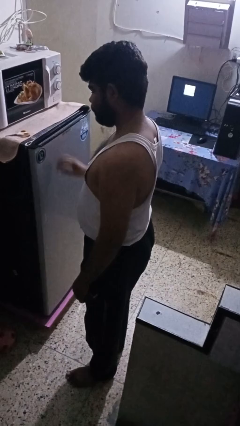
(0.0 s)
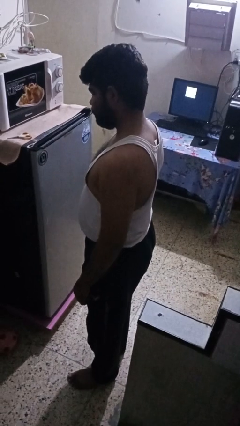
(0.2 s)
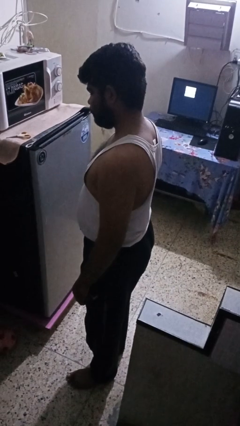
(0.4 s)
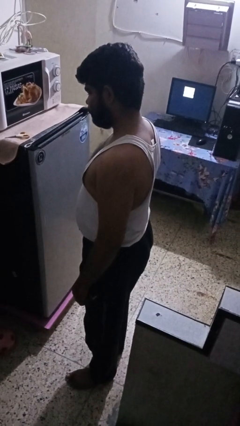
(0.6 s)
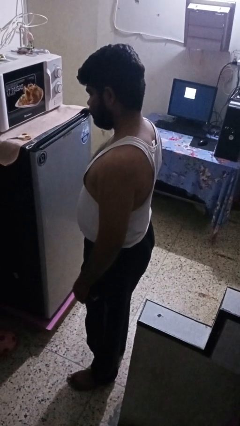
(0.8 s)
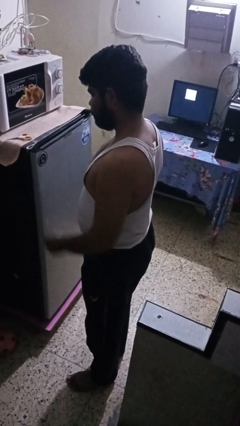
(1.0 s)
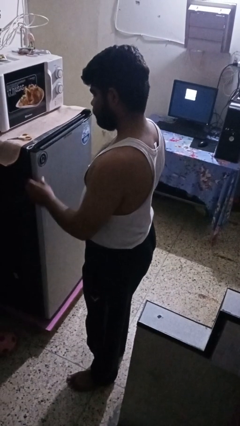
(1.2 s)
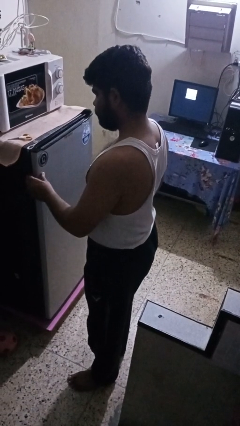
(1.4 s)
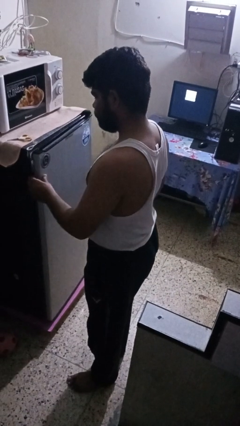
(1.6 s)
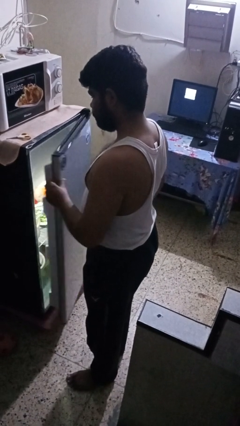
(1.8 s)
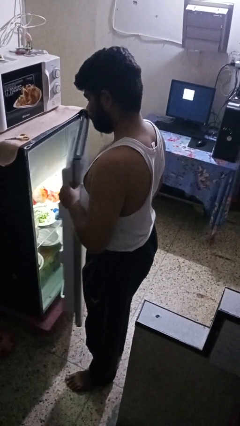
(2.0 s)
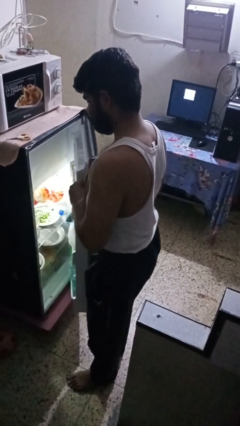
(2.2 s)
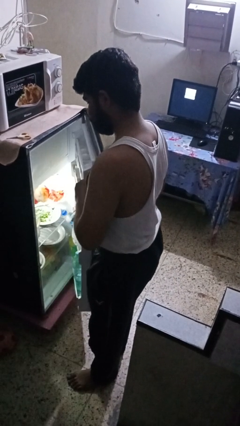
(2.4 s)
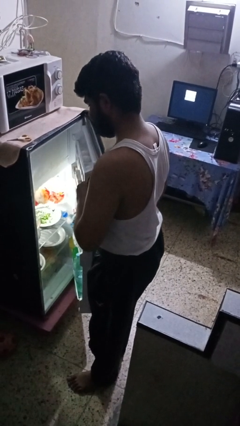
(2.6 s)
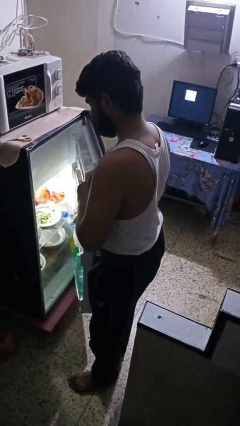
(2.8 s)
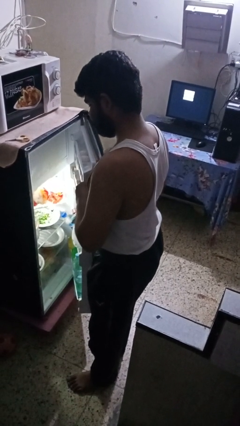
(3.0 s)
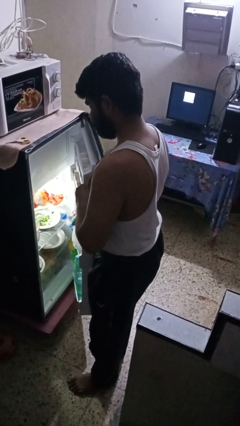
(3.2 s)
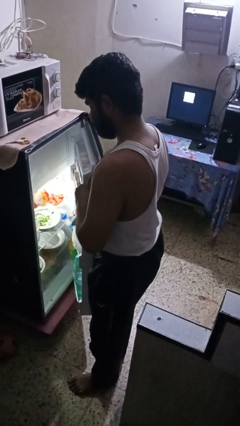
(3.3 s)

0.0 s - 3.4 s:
person opens refrigerator

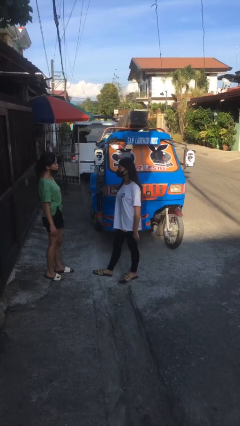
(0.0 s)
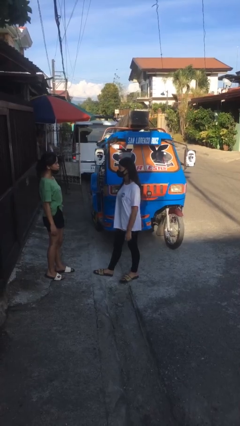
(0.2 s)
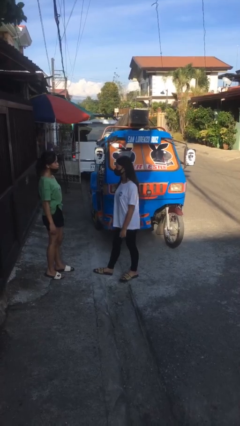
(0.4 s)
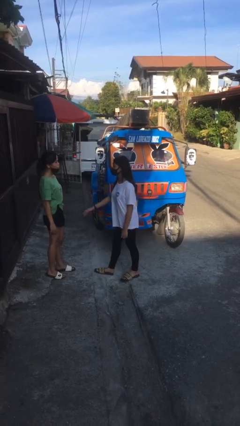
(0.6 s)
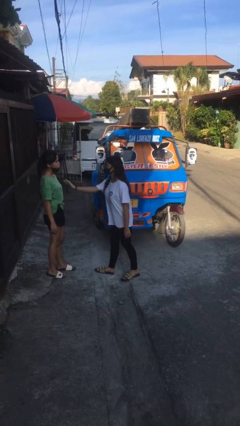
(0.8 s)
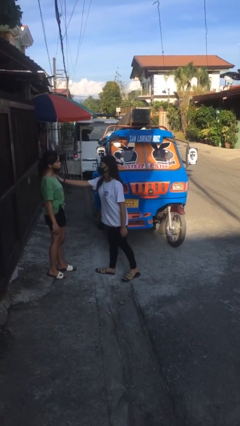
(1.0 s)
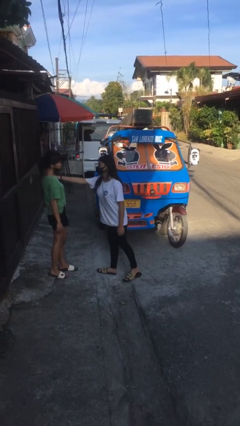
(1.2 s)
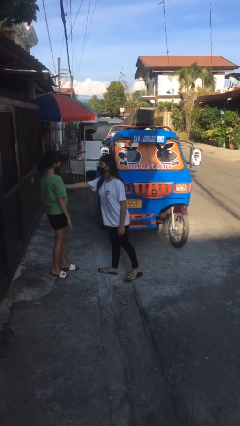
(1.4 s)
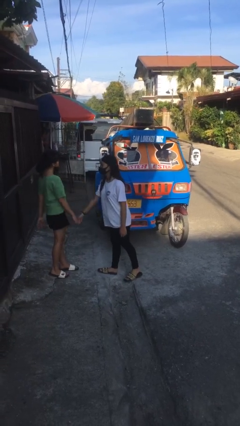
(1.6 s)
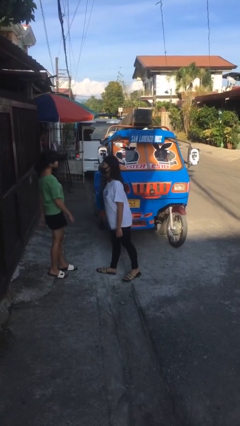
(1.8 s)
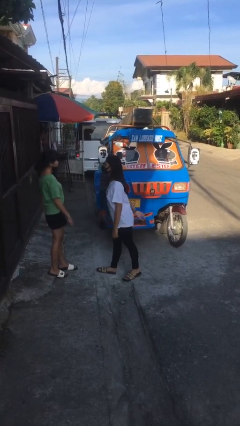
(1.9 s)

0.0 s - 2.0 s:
person shoves person

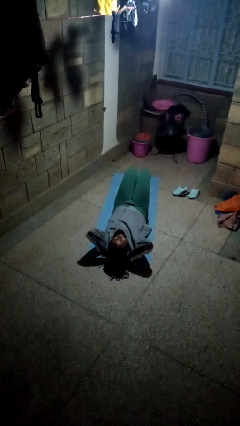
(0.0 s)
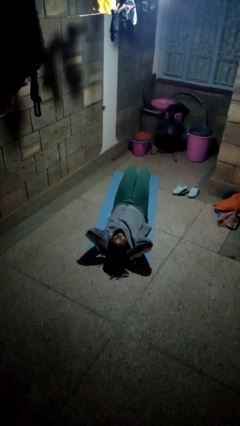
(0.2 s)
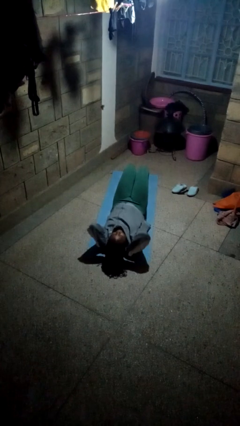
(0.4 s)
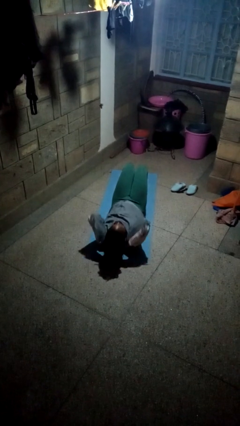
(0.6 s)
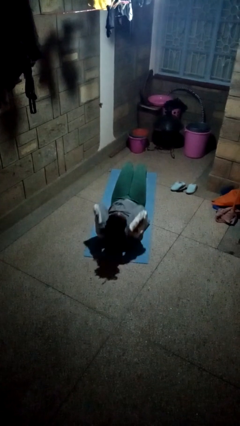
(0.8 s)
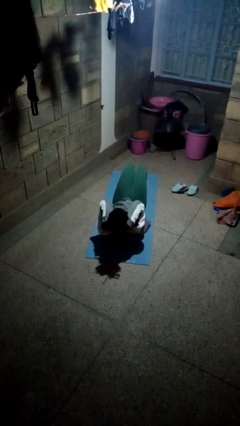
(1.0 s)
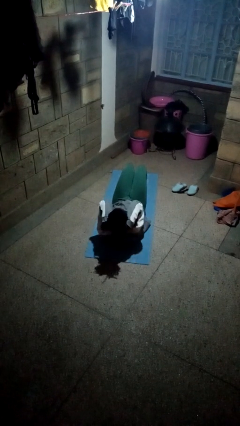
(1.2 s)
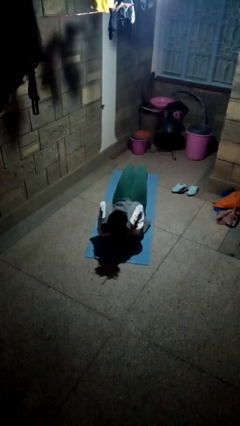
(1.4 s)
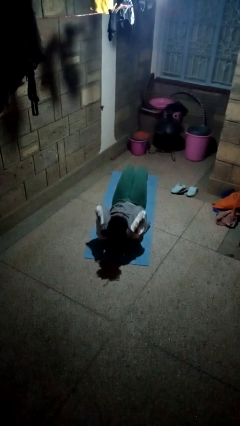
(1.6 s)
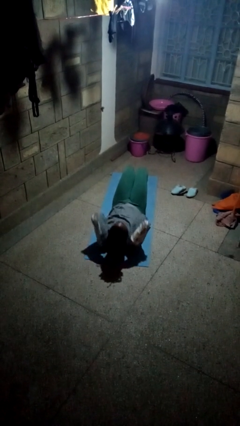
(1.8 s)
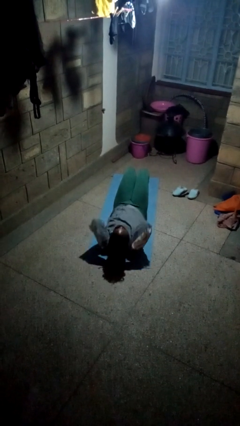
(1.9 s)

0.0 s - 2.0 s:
person exercises with situp

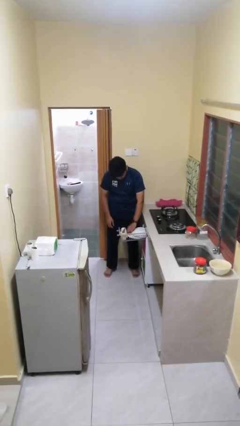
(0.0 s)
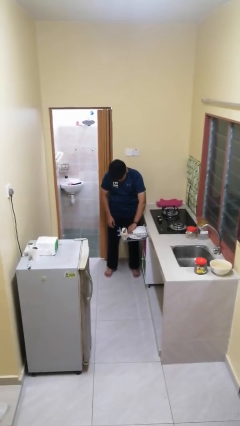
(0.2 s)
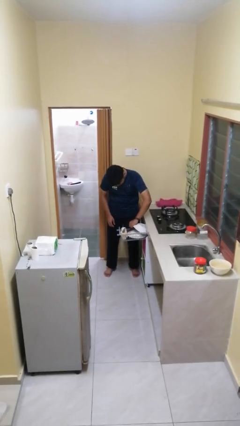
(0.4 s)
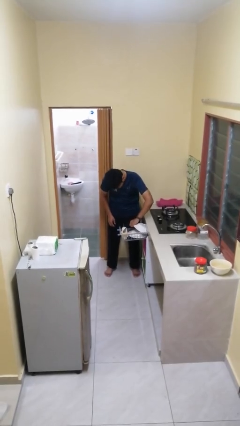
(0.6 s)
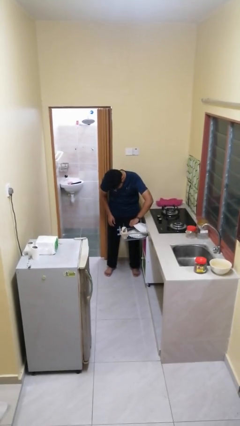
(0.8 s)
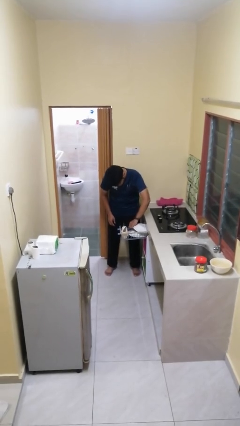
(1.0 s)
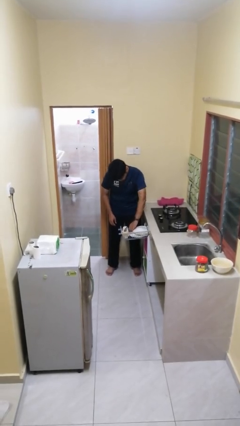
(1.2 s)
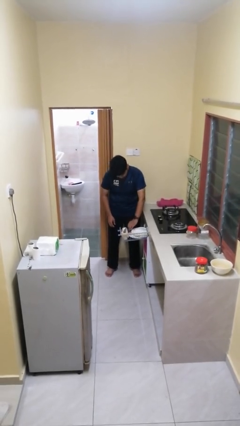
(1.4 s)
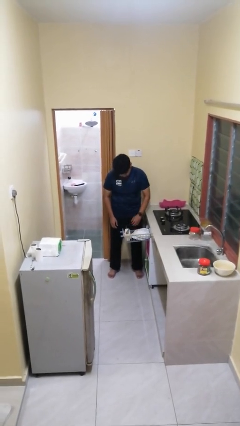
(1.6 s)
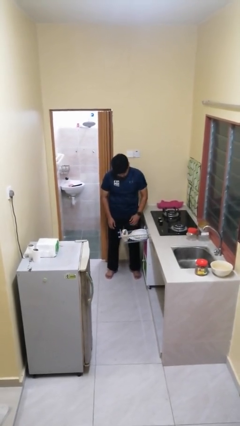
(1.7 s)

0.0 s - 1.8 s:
person searches in kitchen drawer

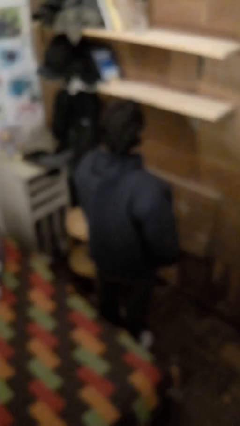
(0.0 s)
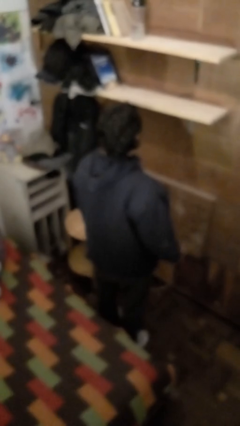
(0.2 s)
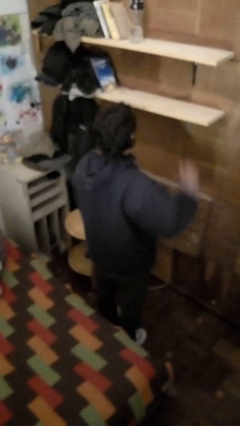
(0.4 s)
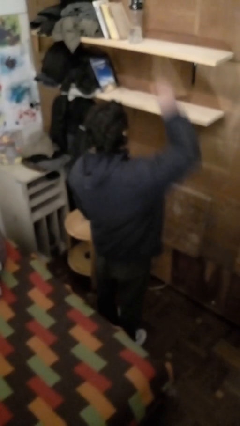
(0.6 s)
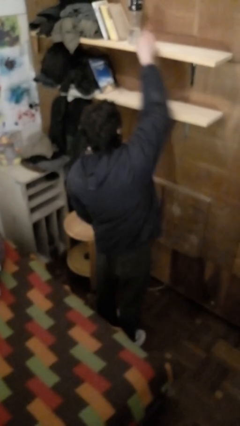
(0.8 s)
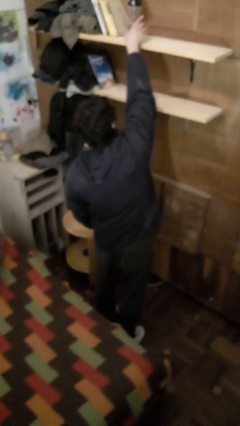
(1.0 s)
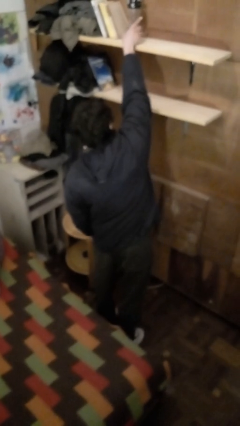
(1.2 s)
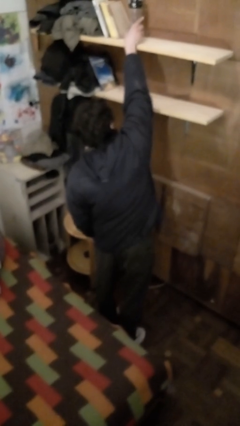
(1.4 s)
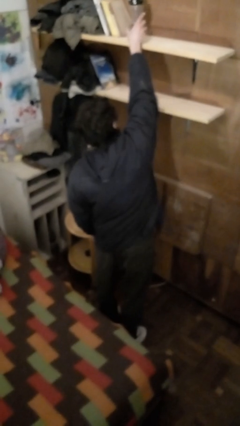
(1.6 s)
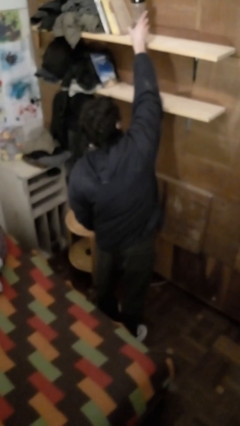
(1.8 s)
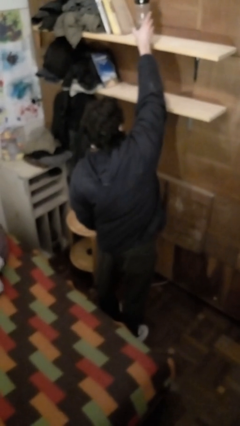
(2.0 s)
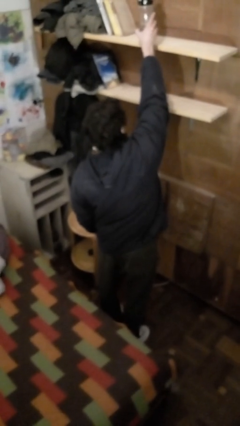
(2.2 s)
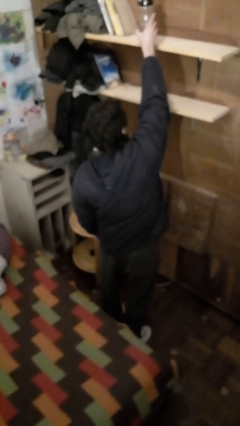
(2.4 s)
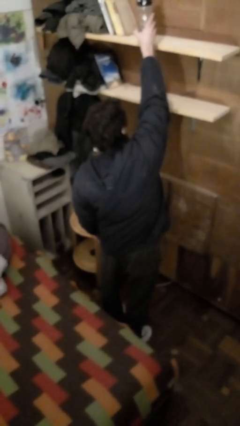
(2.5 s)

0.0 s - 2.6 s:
person picks up object from shelf

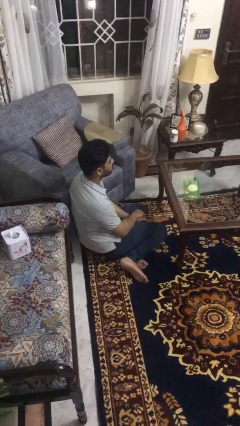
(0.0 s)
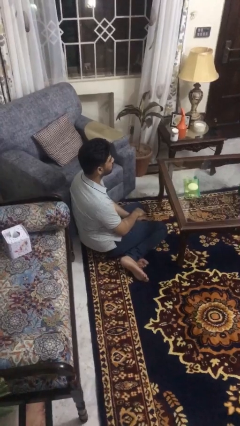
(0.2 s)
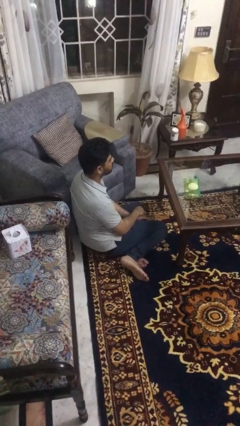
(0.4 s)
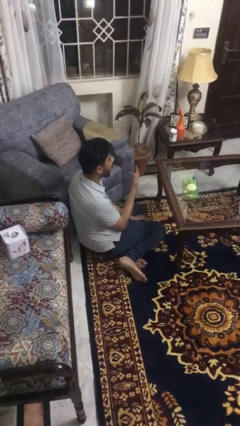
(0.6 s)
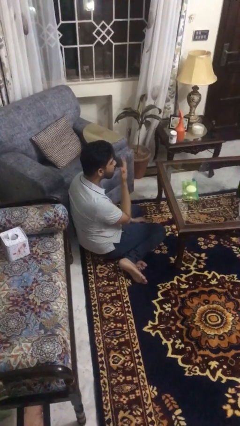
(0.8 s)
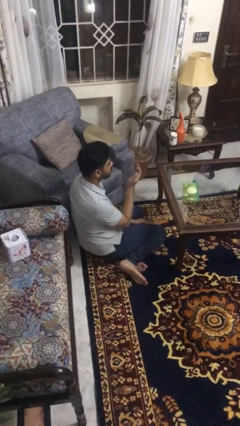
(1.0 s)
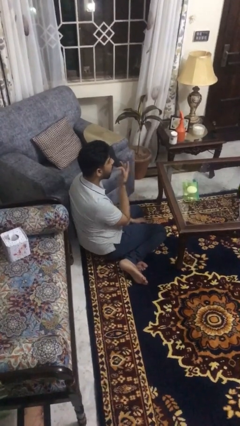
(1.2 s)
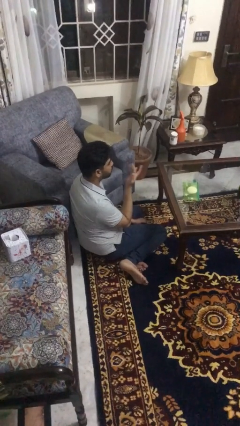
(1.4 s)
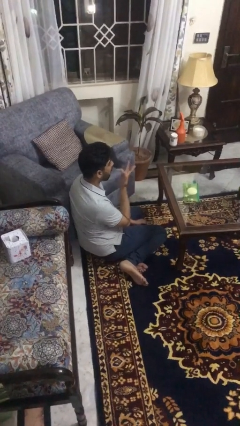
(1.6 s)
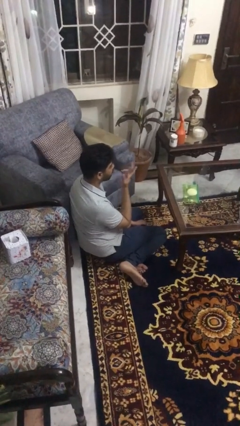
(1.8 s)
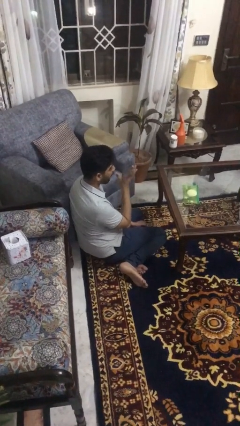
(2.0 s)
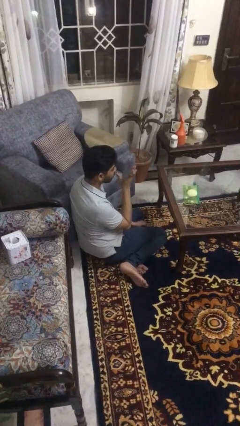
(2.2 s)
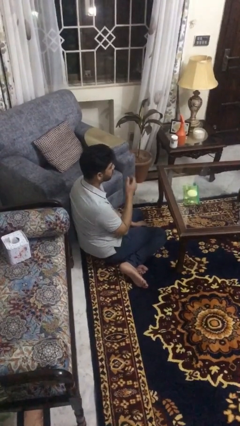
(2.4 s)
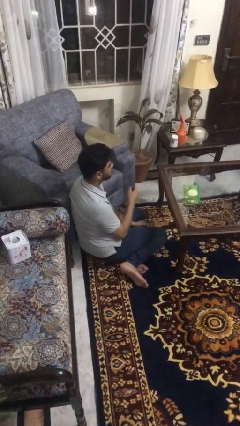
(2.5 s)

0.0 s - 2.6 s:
person licks fingers

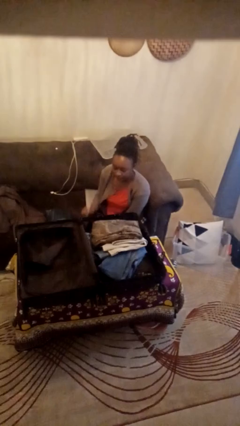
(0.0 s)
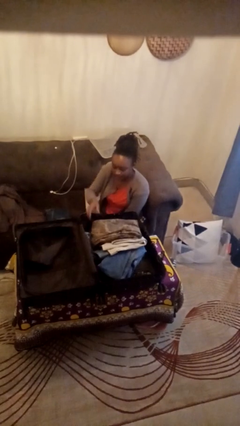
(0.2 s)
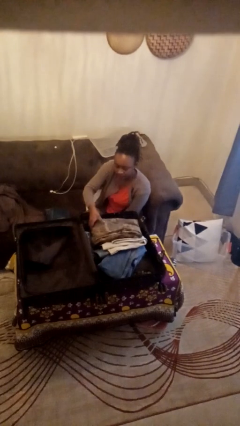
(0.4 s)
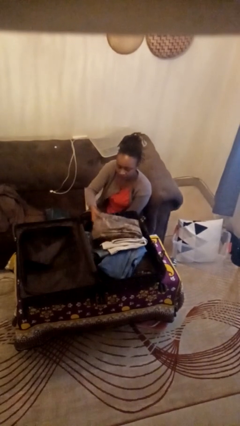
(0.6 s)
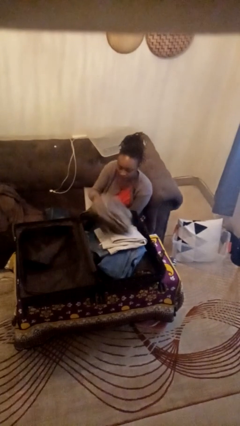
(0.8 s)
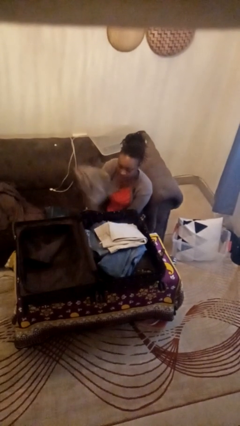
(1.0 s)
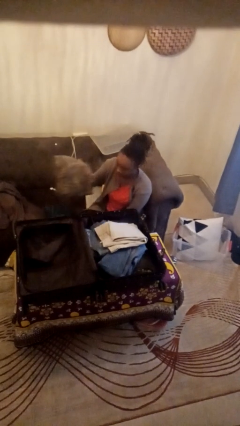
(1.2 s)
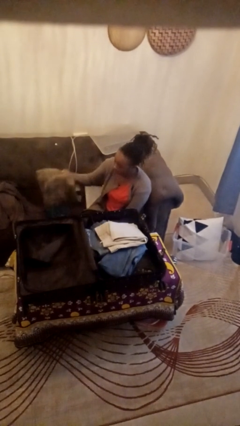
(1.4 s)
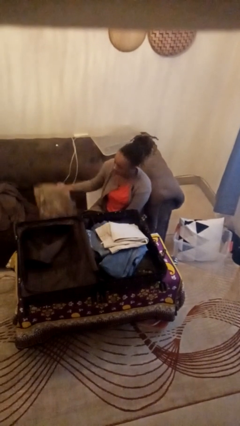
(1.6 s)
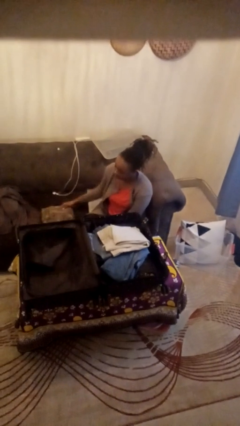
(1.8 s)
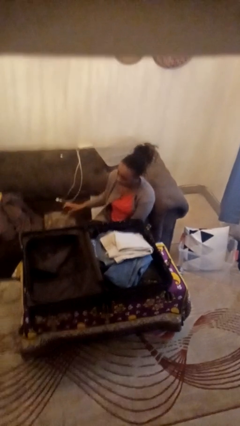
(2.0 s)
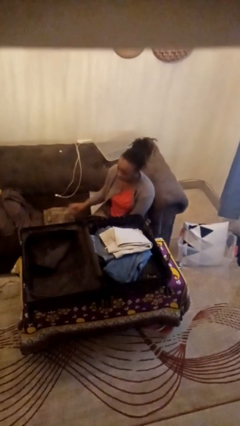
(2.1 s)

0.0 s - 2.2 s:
person unloads clothes from suitcase

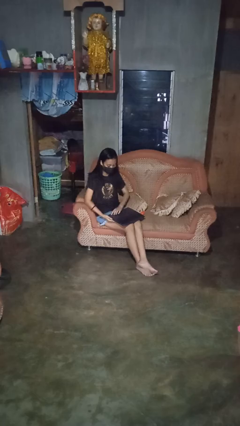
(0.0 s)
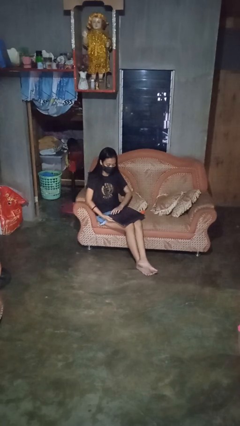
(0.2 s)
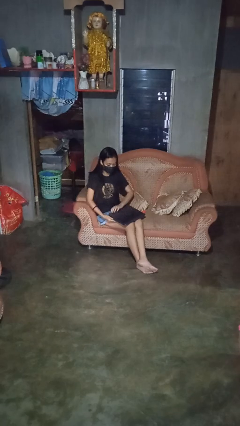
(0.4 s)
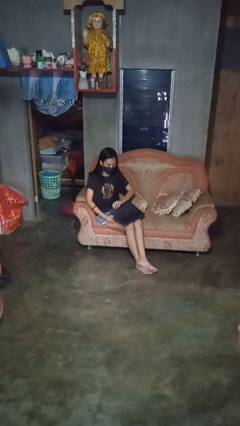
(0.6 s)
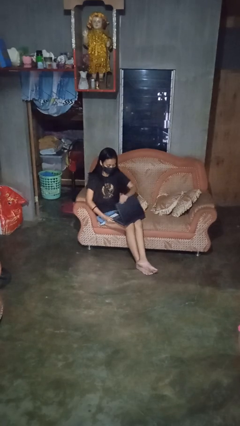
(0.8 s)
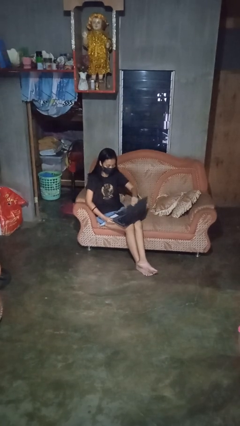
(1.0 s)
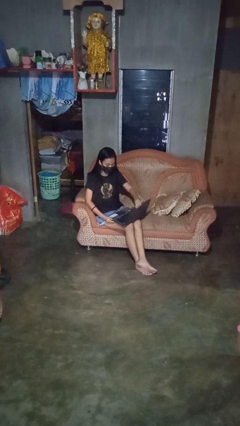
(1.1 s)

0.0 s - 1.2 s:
person opens laptop
